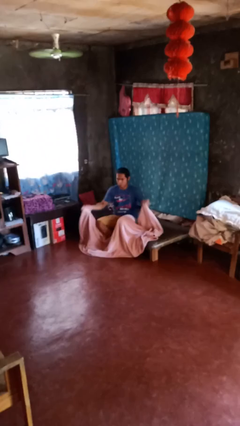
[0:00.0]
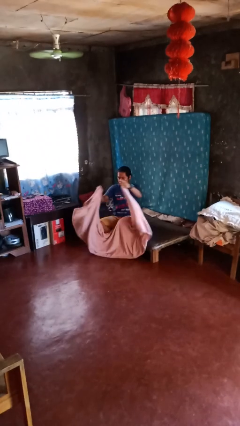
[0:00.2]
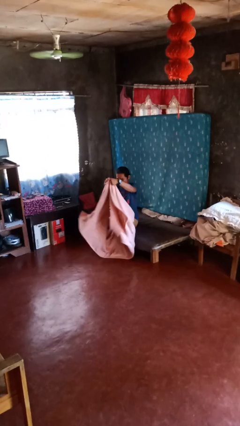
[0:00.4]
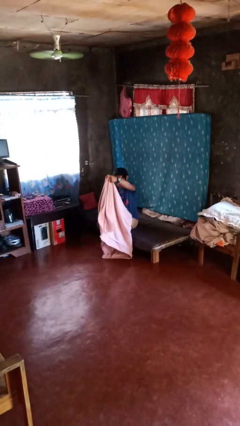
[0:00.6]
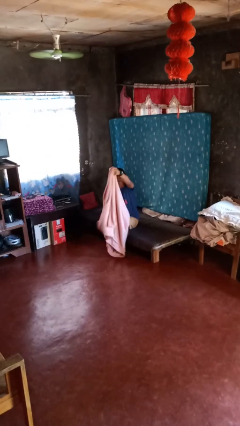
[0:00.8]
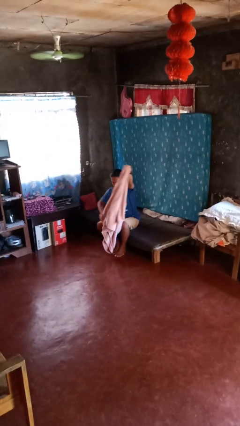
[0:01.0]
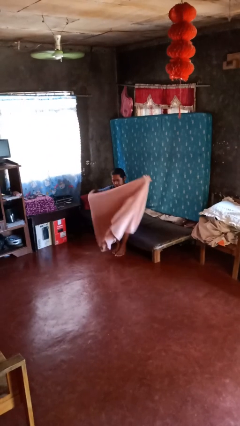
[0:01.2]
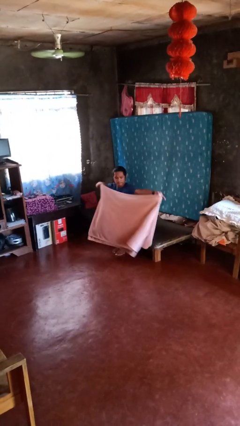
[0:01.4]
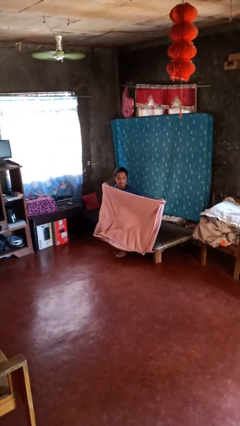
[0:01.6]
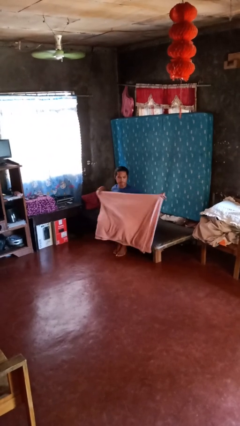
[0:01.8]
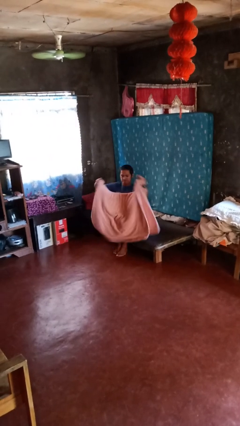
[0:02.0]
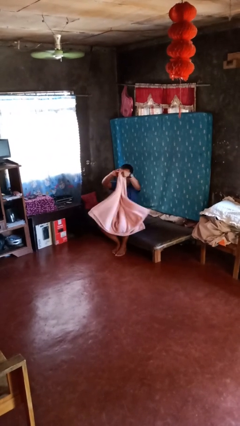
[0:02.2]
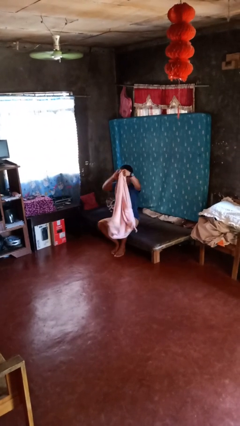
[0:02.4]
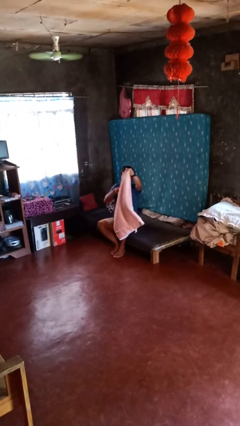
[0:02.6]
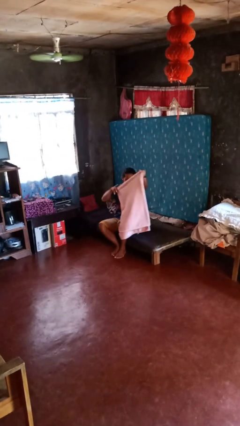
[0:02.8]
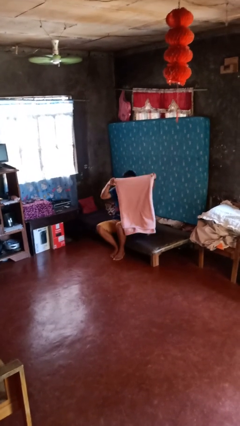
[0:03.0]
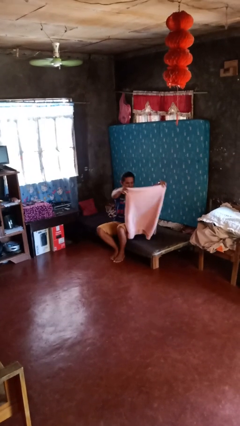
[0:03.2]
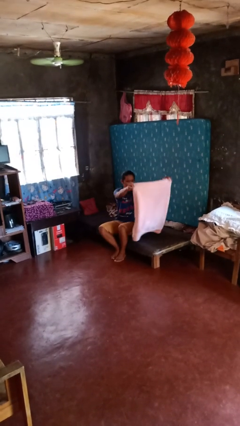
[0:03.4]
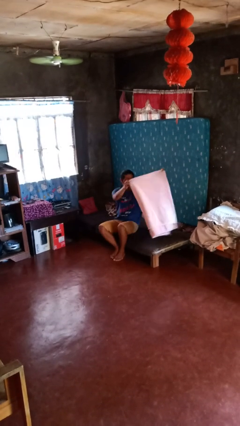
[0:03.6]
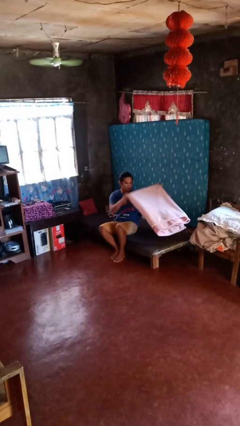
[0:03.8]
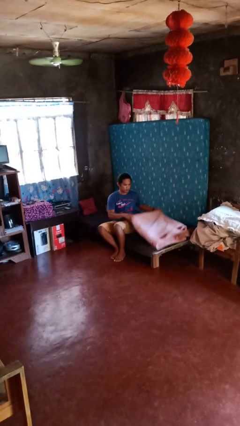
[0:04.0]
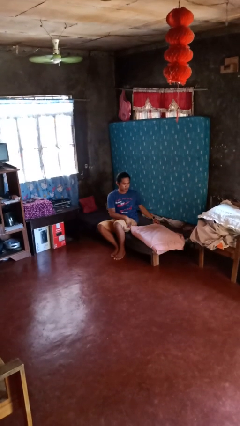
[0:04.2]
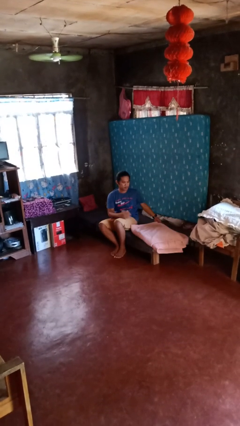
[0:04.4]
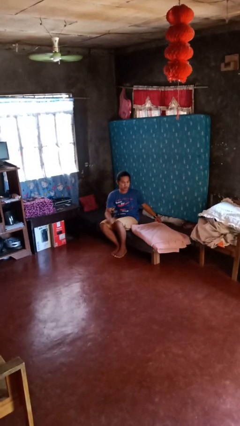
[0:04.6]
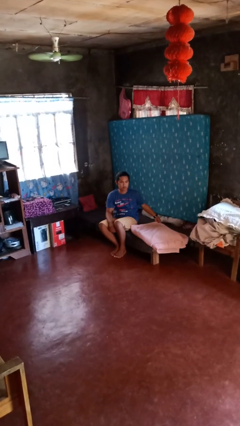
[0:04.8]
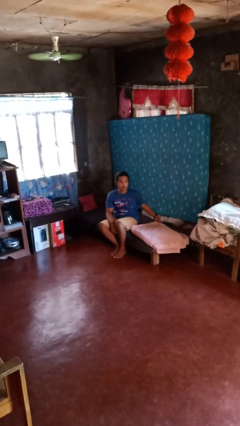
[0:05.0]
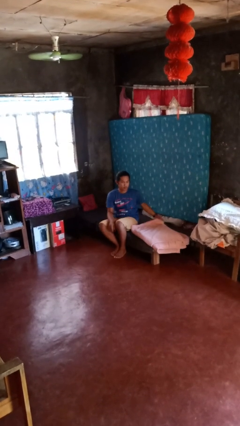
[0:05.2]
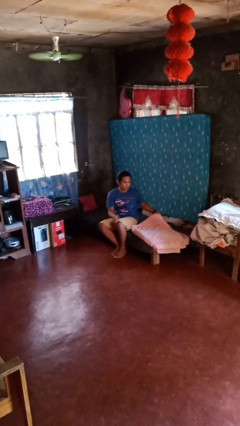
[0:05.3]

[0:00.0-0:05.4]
person folds blanket

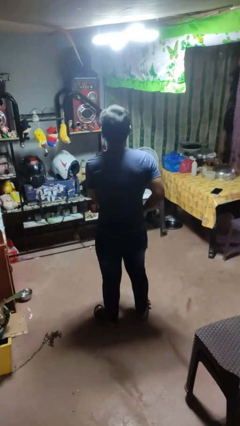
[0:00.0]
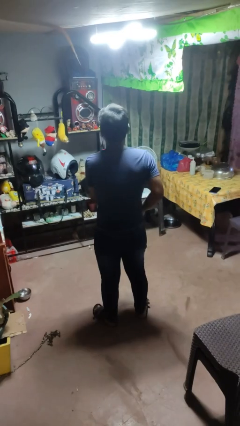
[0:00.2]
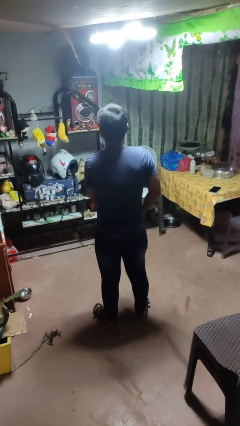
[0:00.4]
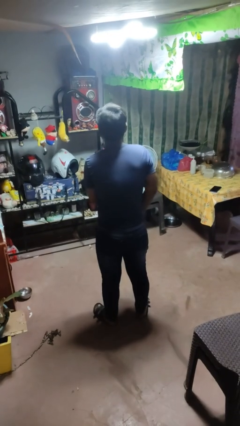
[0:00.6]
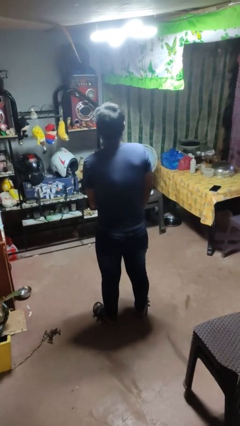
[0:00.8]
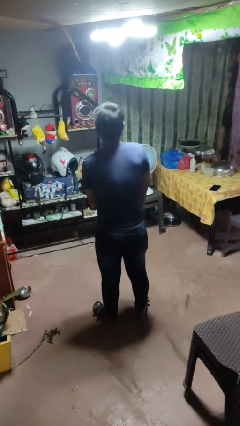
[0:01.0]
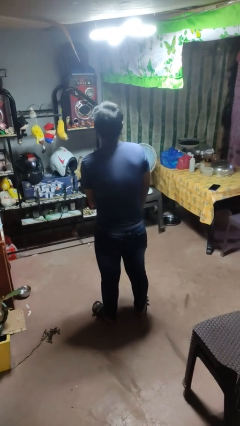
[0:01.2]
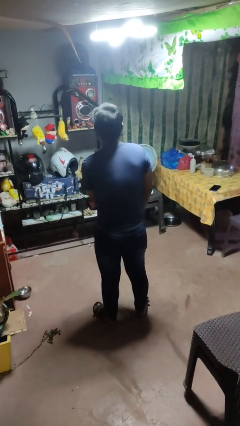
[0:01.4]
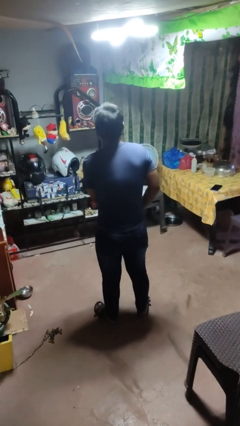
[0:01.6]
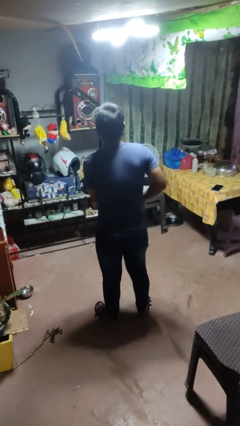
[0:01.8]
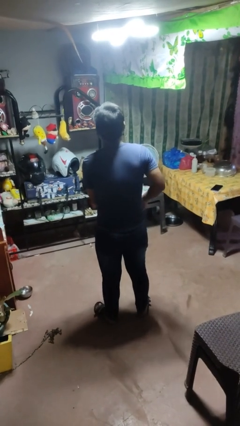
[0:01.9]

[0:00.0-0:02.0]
person puts hands in back pockets

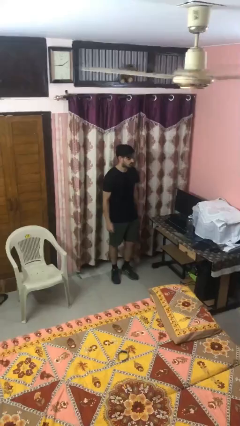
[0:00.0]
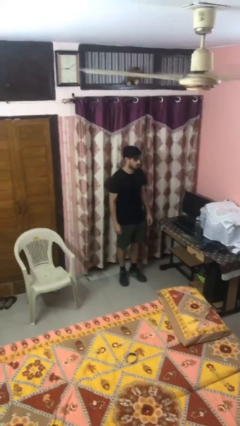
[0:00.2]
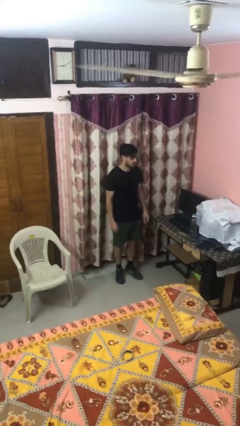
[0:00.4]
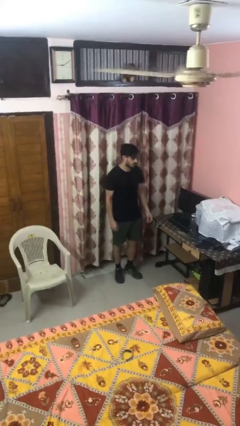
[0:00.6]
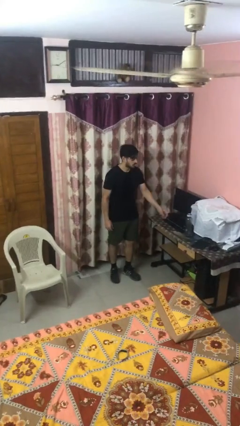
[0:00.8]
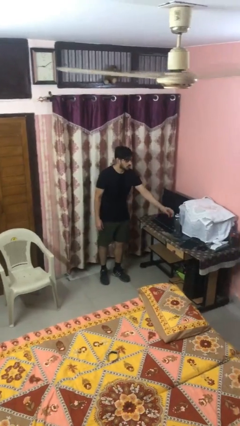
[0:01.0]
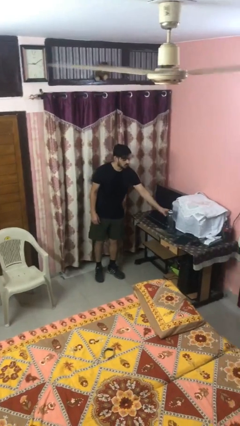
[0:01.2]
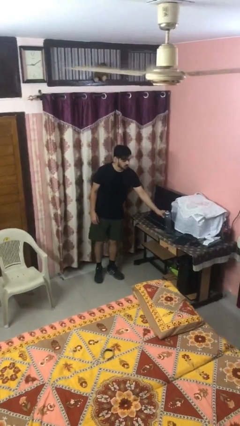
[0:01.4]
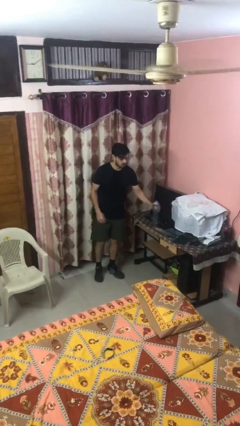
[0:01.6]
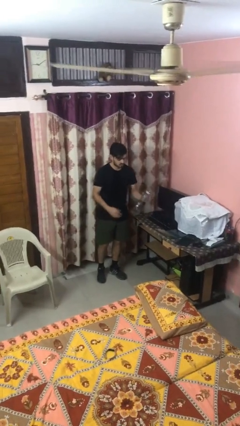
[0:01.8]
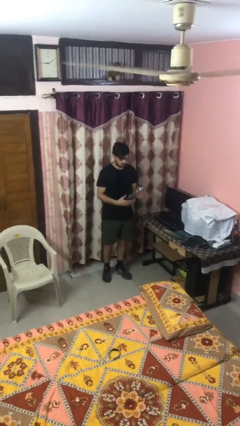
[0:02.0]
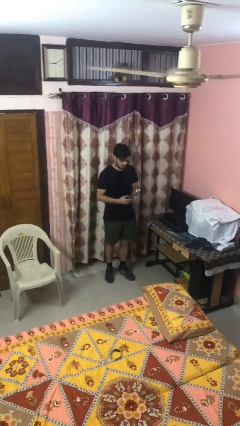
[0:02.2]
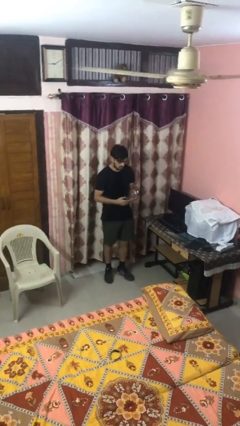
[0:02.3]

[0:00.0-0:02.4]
person picks up object from countertop

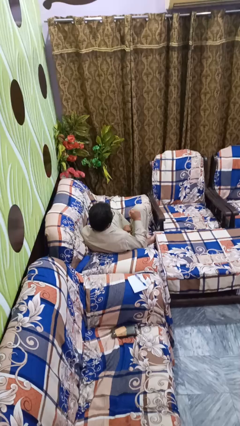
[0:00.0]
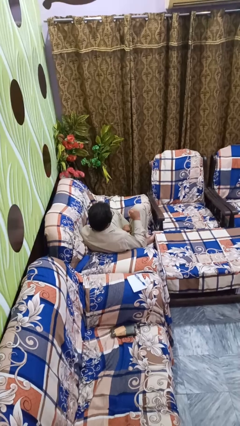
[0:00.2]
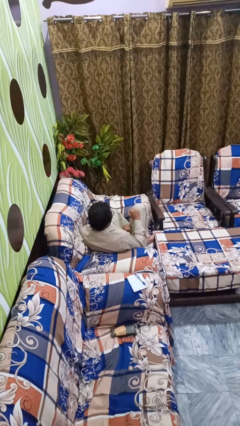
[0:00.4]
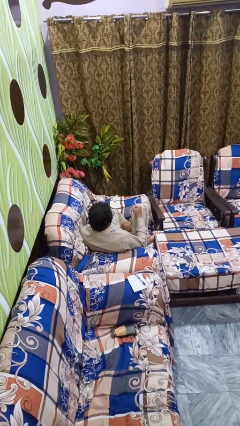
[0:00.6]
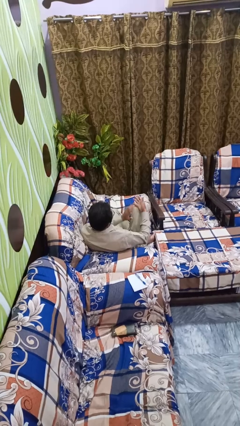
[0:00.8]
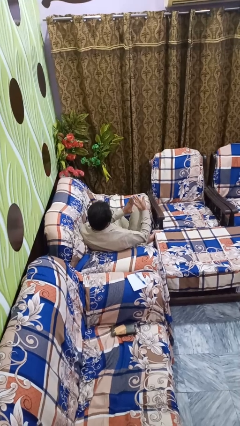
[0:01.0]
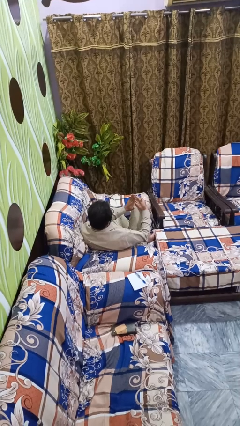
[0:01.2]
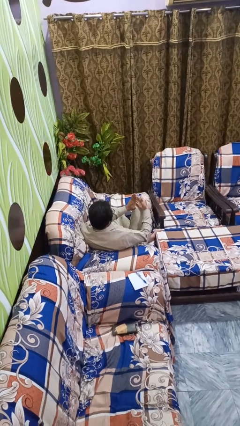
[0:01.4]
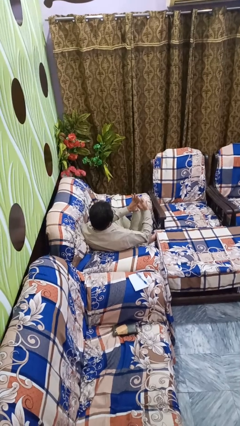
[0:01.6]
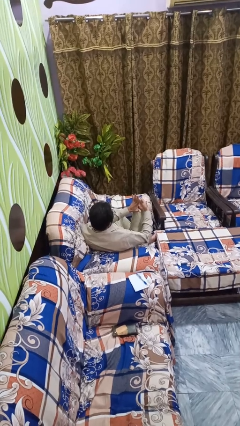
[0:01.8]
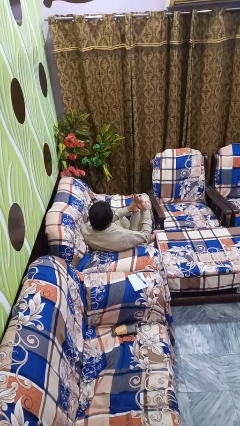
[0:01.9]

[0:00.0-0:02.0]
person gestures number five

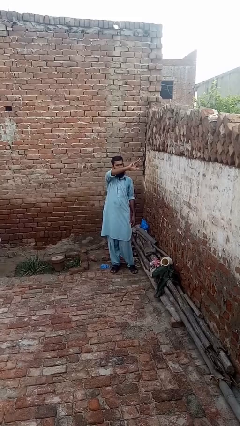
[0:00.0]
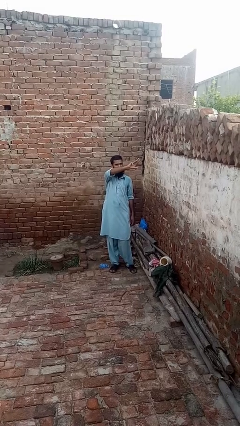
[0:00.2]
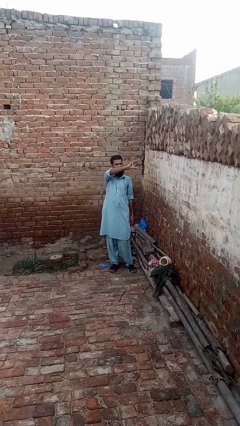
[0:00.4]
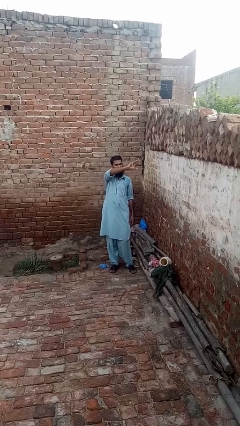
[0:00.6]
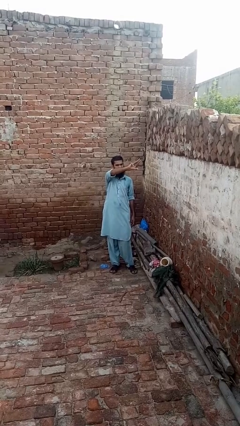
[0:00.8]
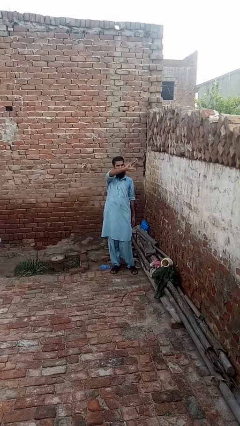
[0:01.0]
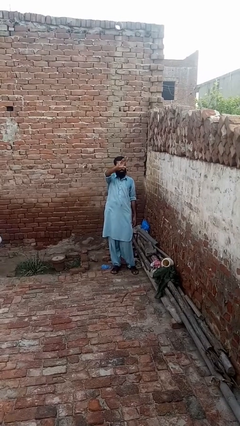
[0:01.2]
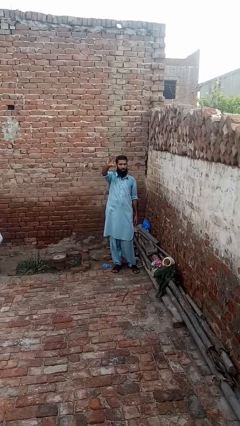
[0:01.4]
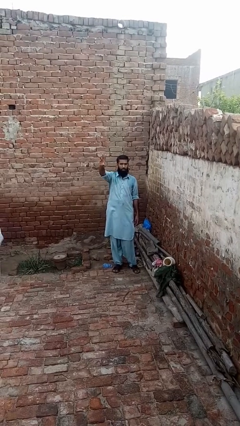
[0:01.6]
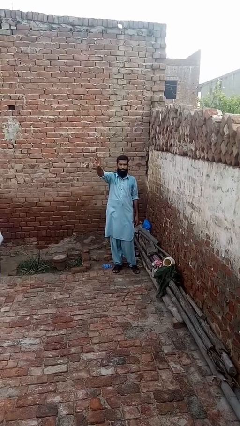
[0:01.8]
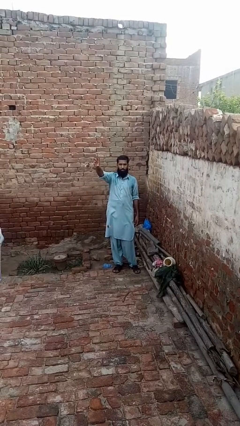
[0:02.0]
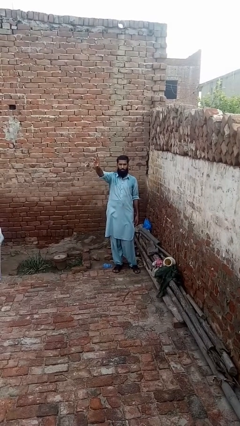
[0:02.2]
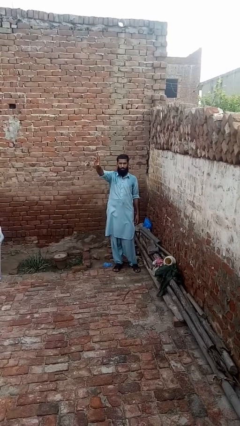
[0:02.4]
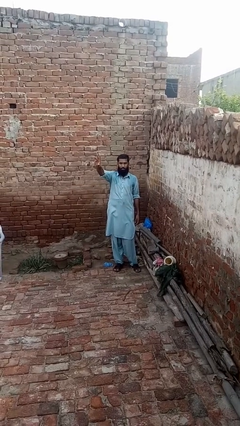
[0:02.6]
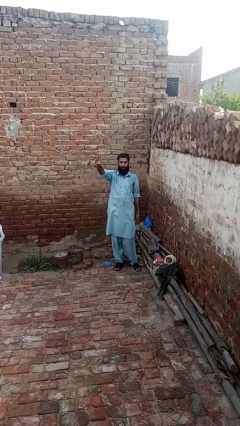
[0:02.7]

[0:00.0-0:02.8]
person gestures swipe right

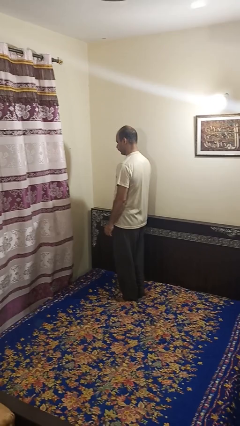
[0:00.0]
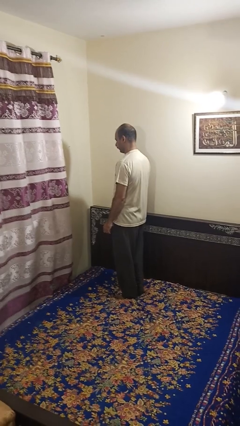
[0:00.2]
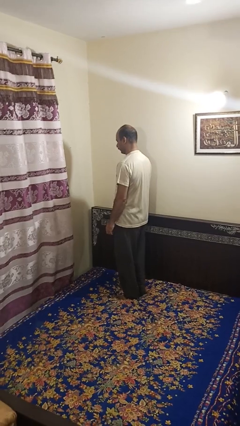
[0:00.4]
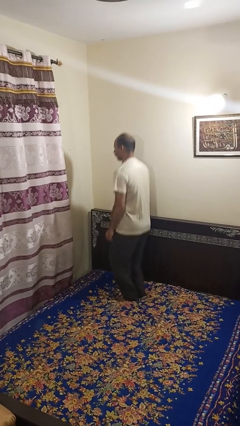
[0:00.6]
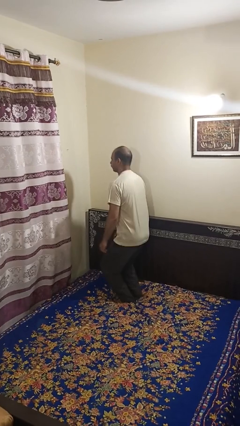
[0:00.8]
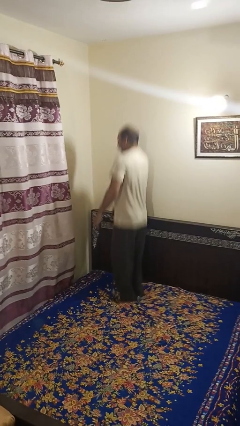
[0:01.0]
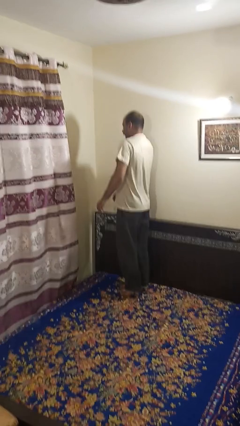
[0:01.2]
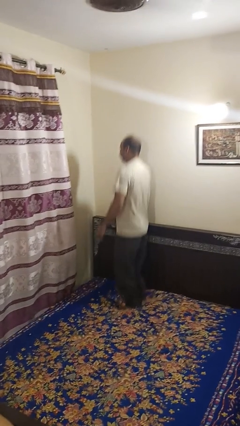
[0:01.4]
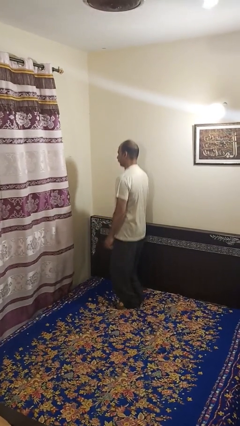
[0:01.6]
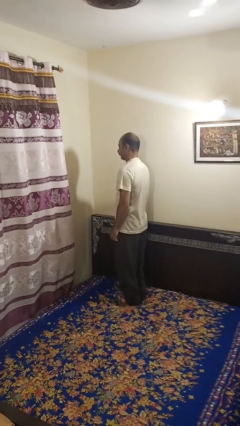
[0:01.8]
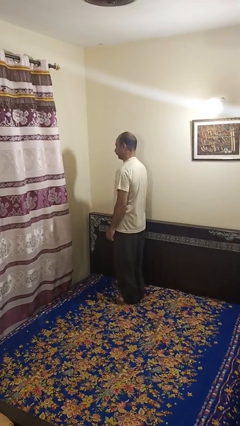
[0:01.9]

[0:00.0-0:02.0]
person jumps on bed

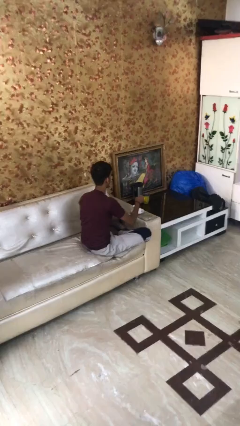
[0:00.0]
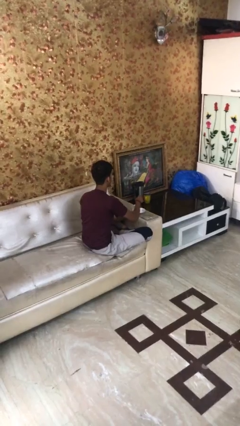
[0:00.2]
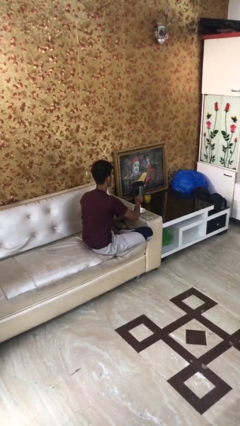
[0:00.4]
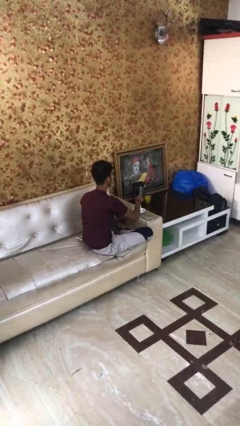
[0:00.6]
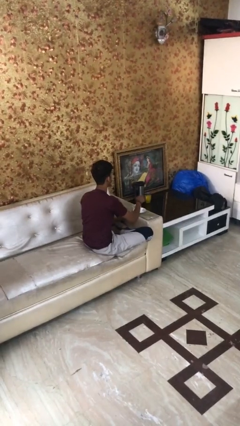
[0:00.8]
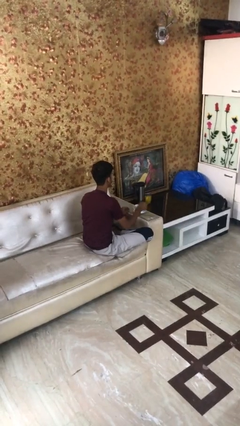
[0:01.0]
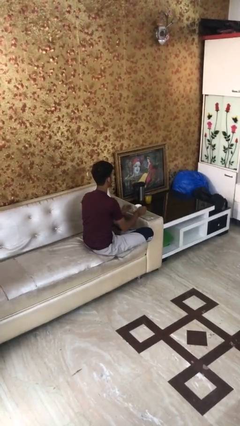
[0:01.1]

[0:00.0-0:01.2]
person stirs mug
